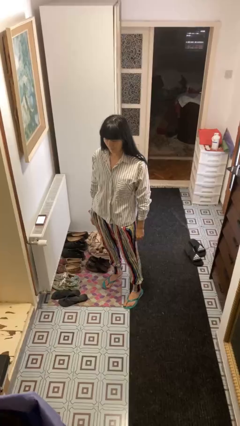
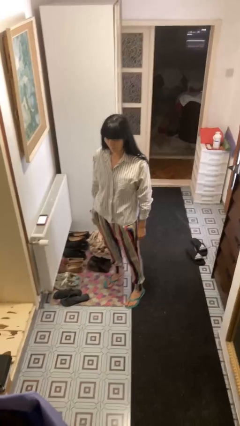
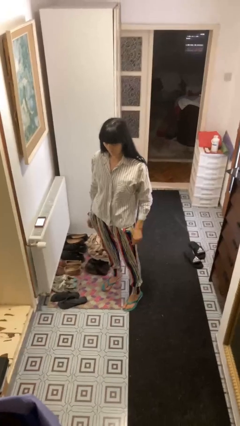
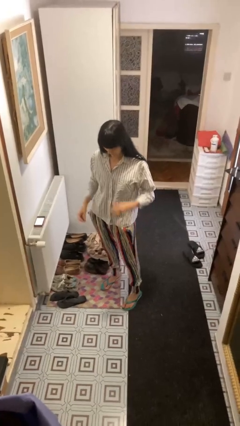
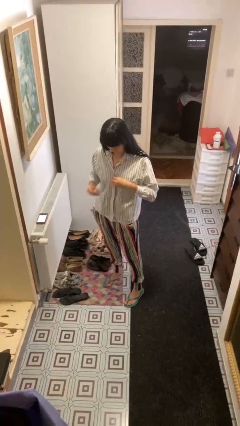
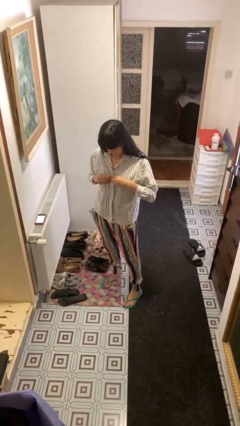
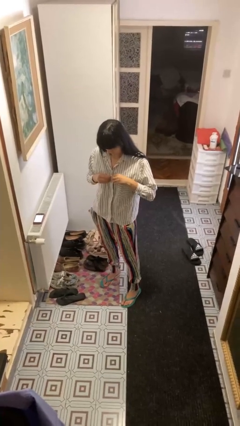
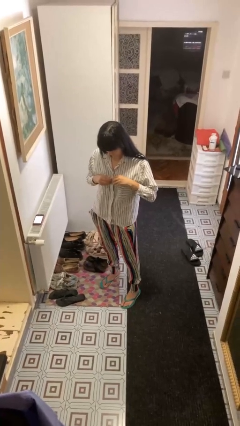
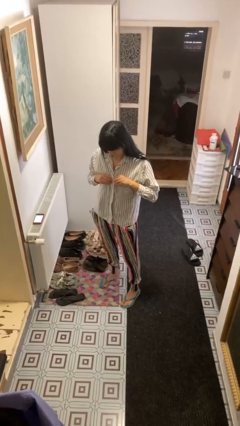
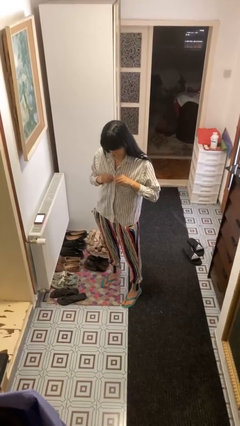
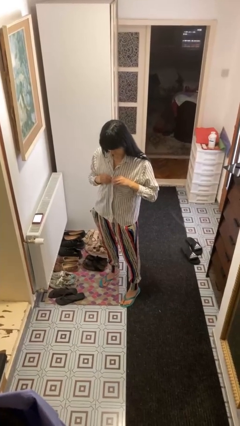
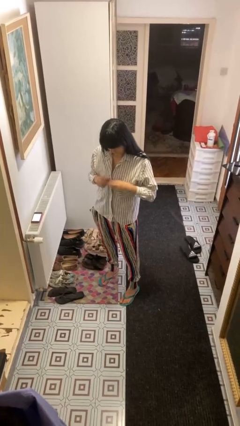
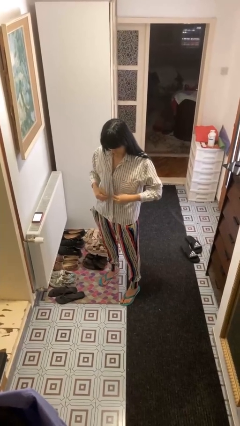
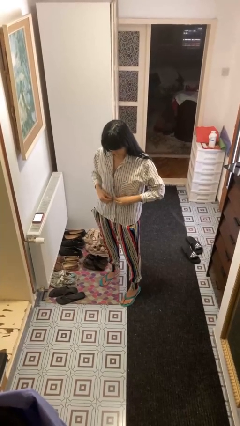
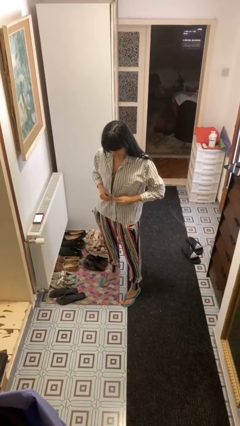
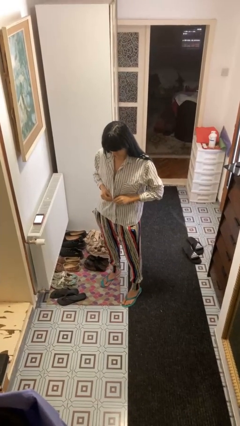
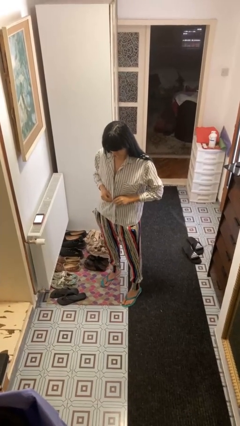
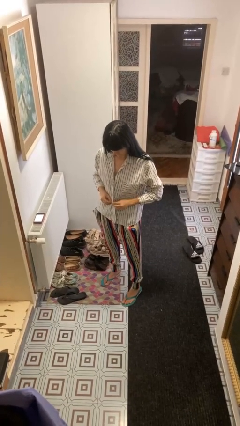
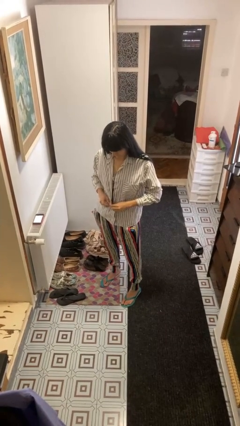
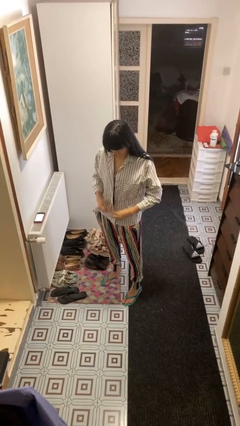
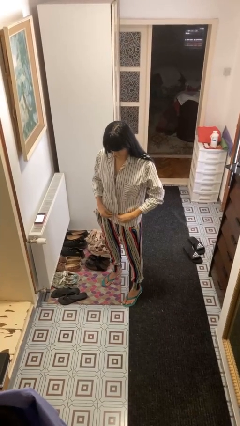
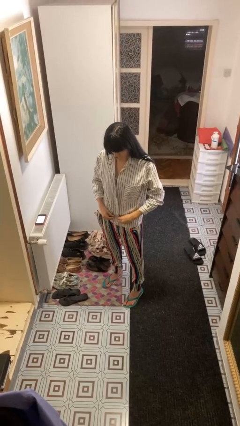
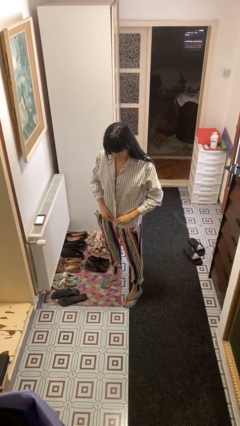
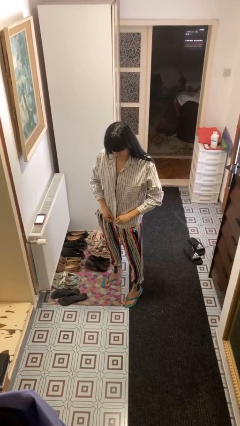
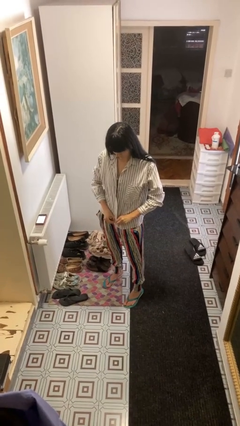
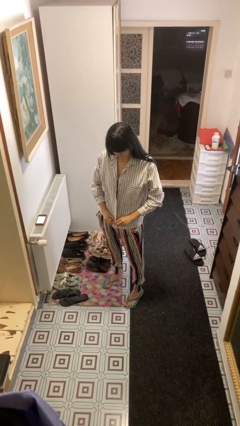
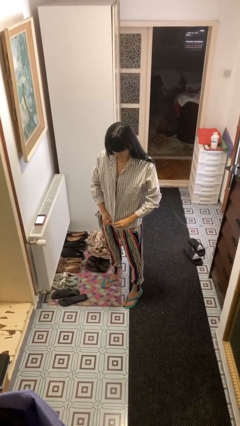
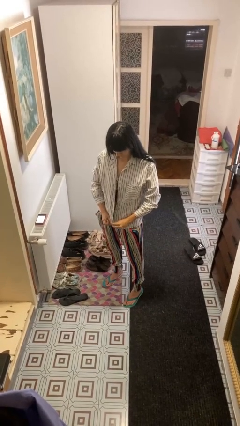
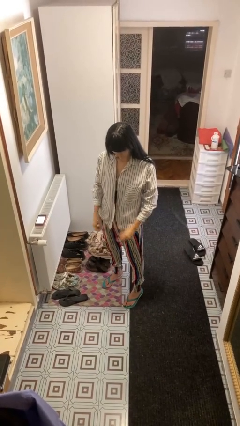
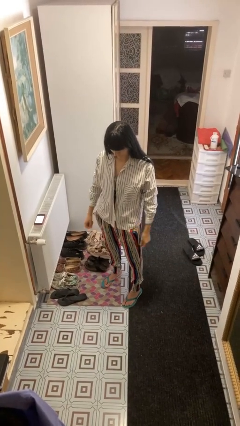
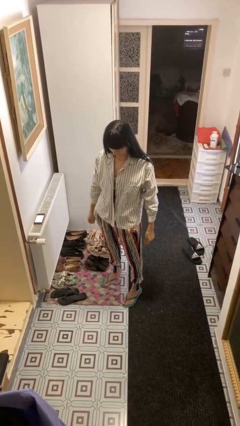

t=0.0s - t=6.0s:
person unbuttons shirt

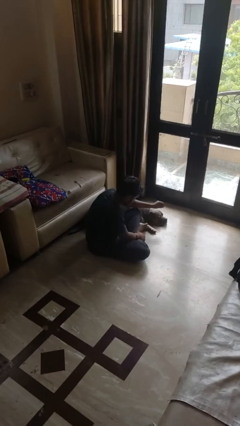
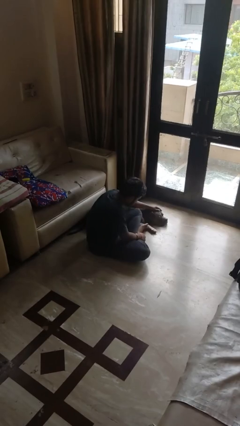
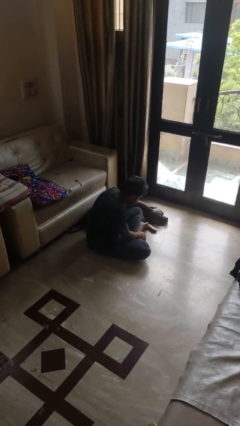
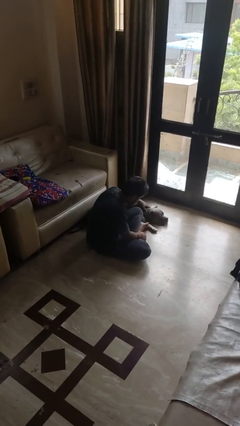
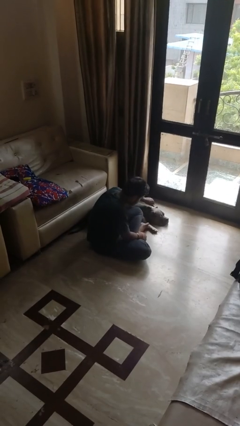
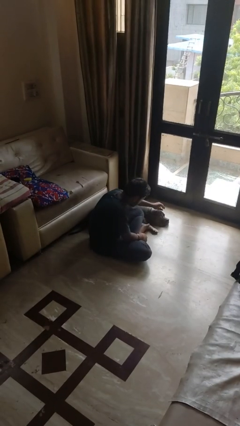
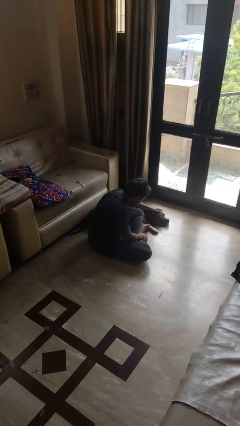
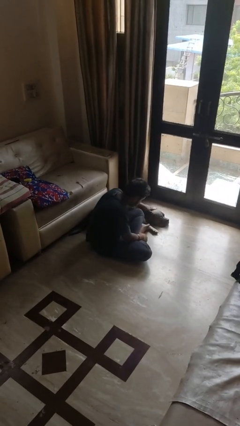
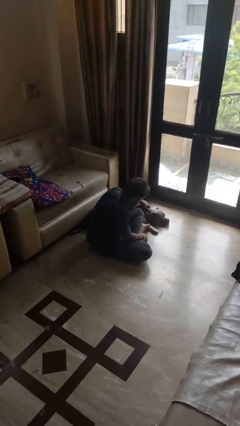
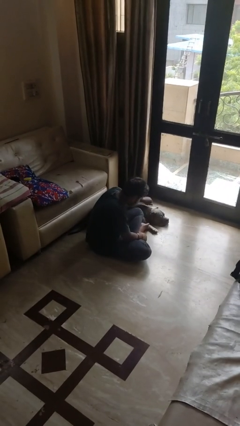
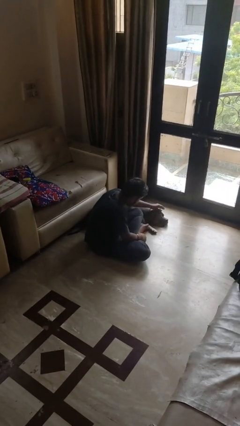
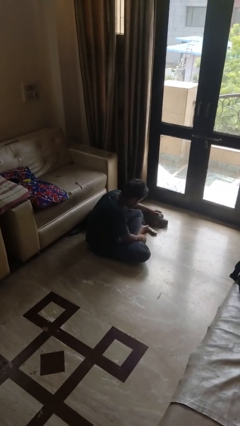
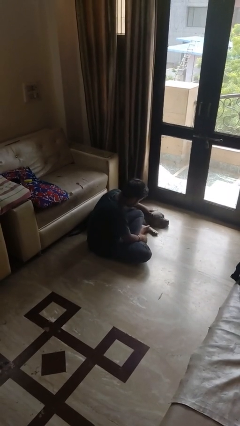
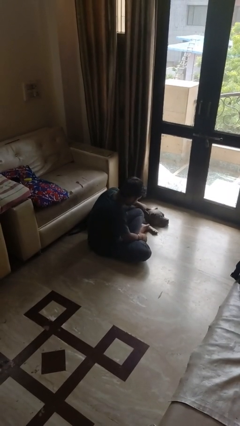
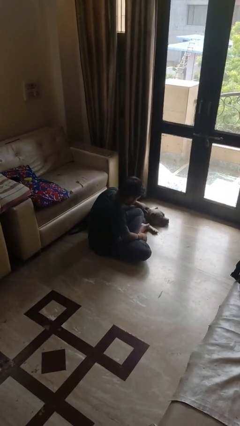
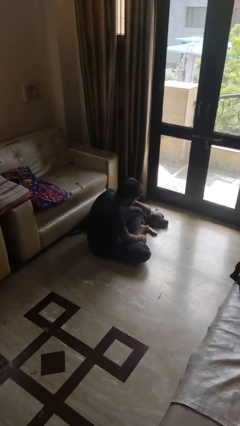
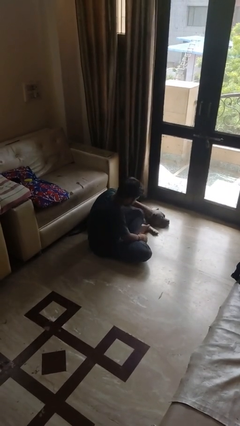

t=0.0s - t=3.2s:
person pets dog

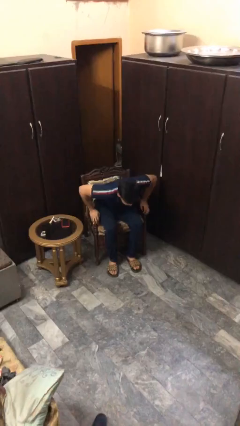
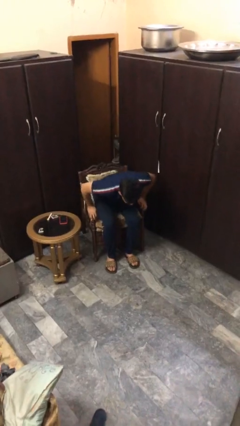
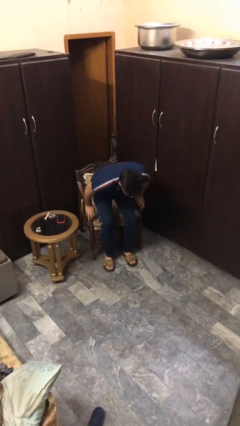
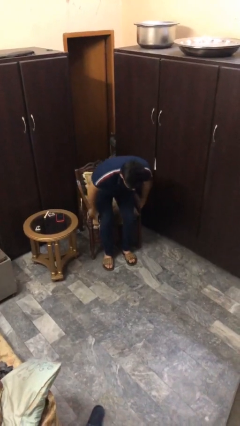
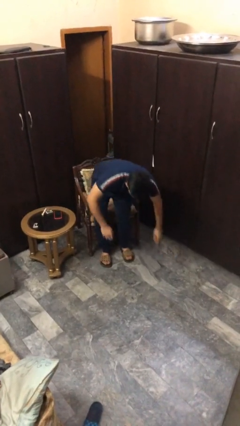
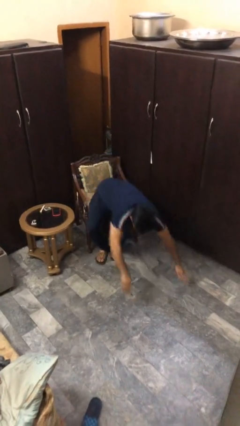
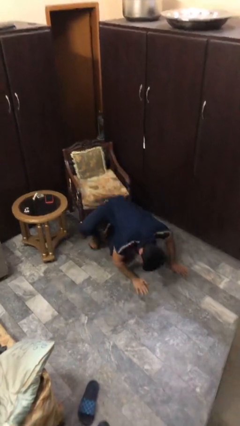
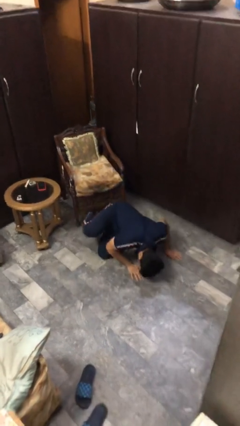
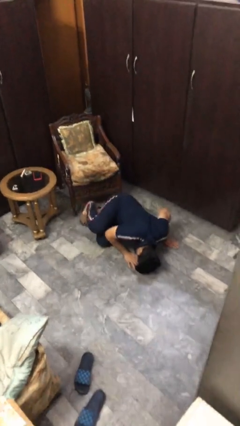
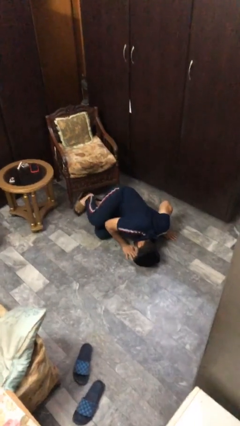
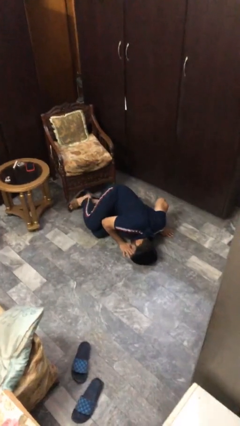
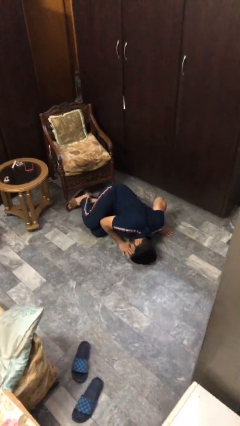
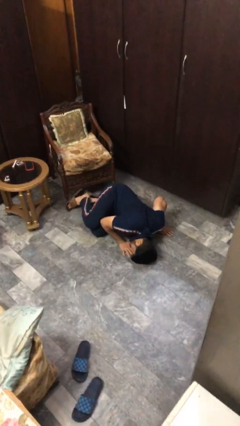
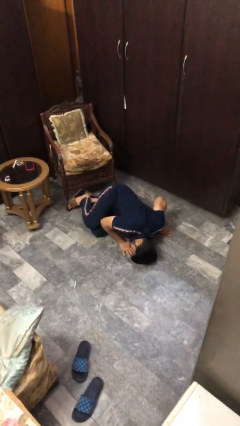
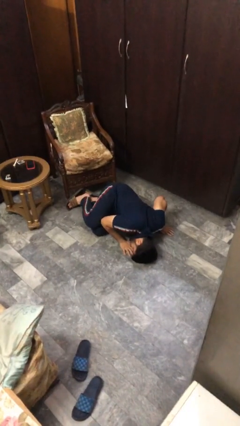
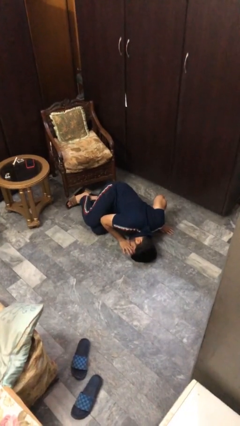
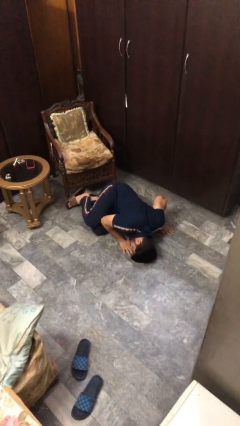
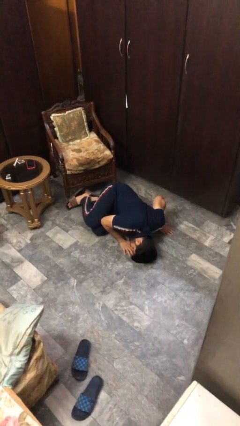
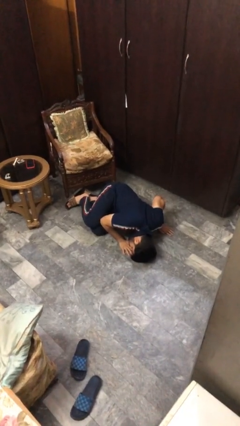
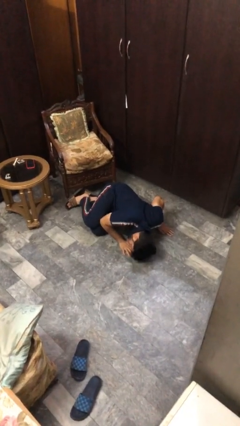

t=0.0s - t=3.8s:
person falls from chair

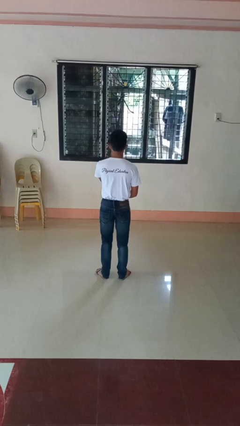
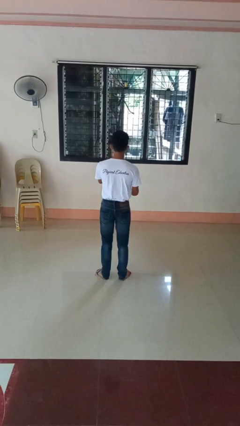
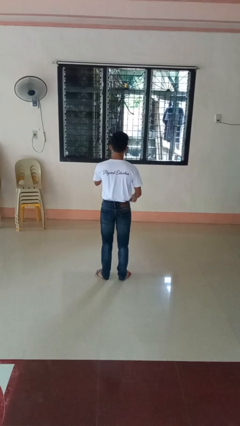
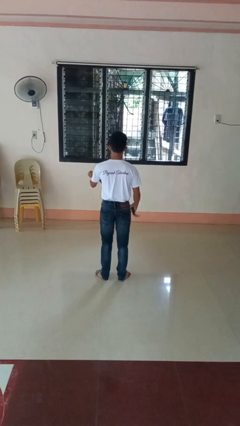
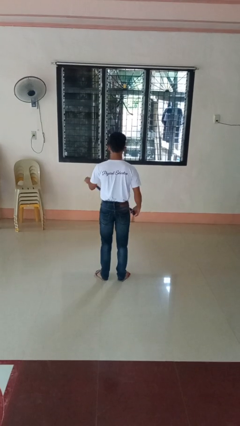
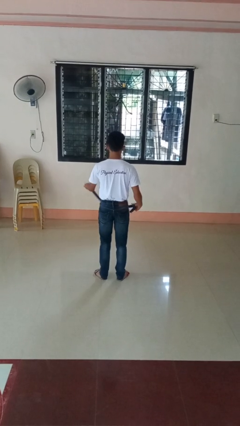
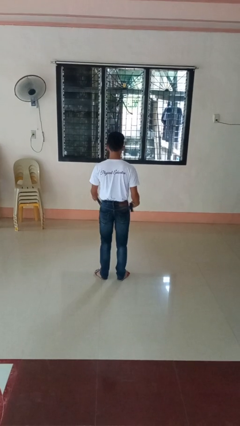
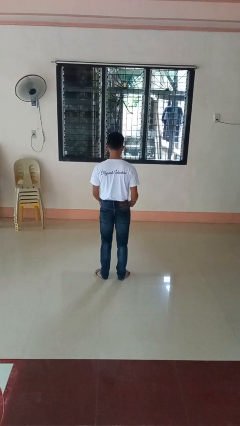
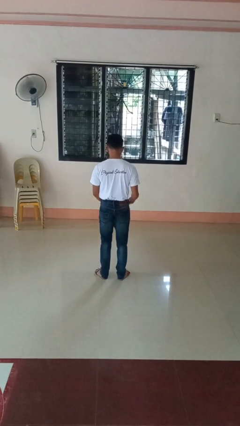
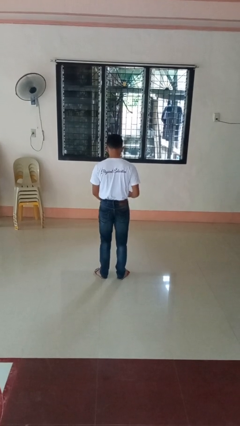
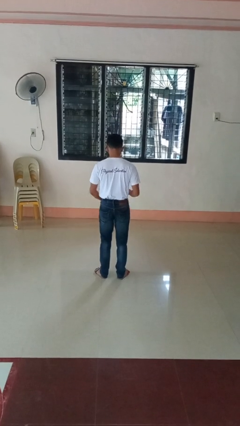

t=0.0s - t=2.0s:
person takes off belt

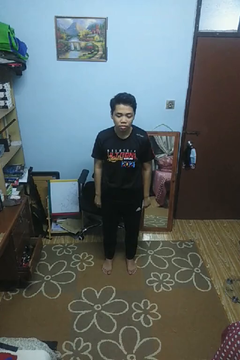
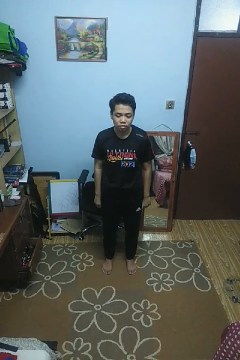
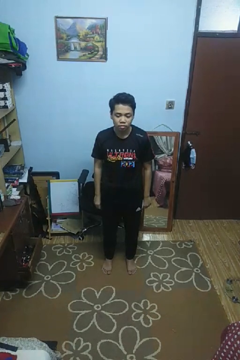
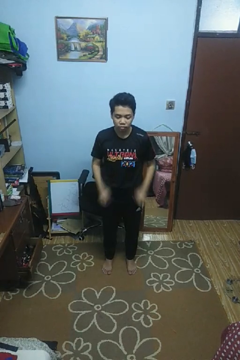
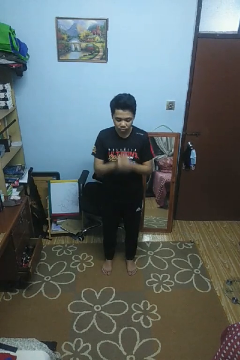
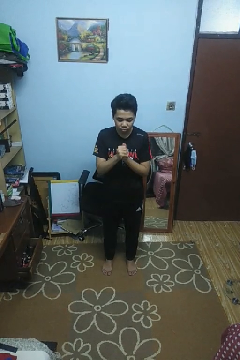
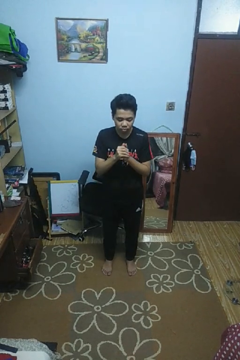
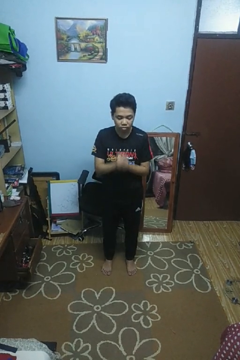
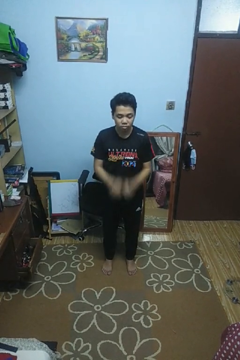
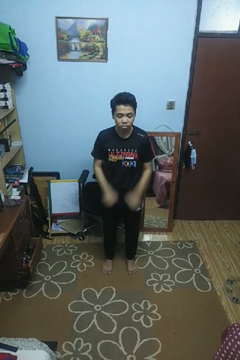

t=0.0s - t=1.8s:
person cracks knuckles

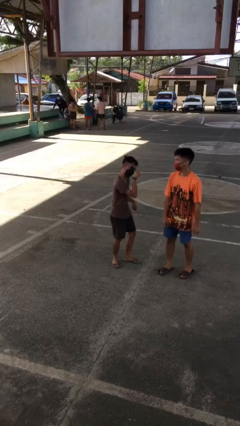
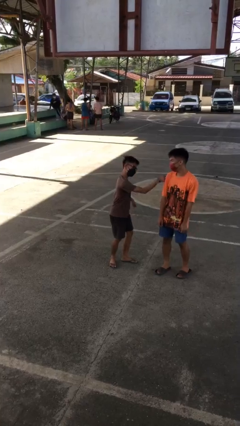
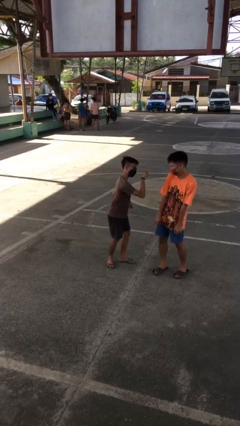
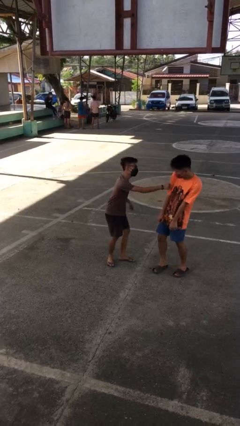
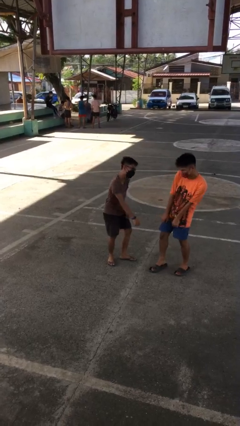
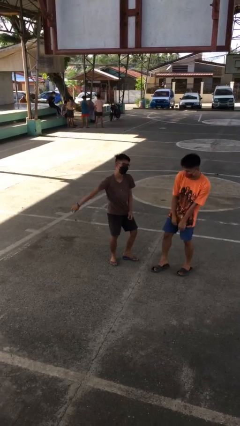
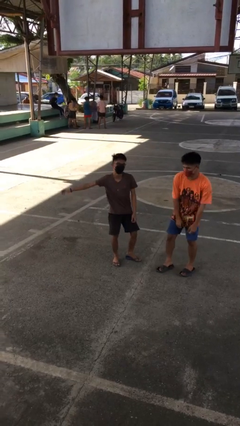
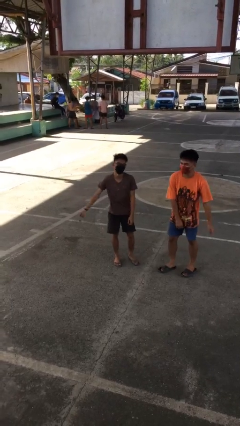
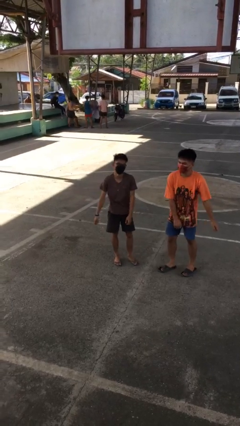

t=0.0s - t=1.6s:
person pounds shoulders of person
